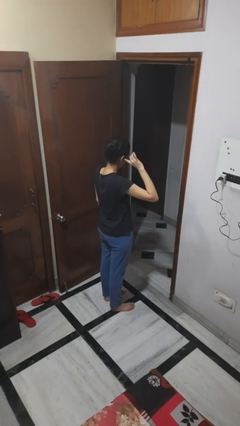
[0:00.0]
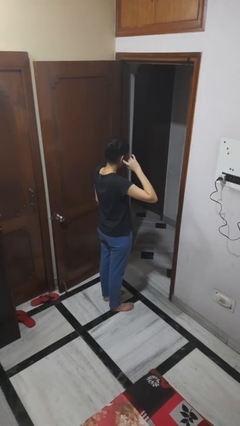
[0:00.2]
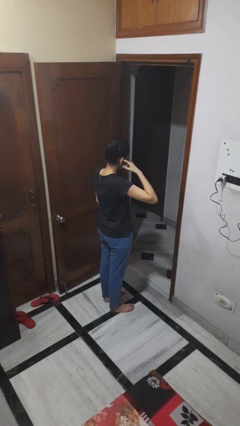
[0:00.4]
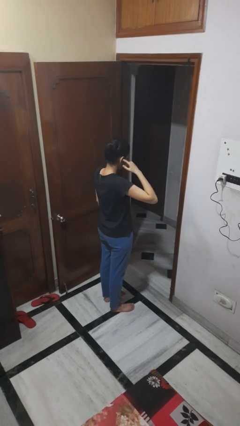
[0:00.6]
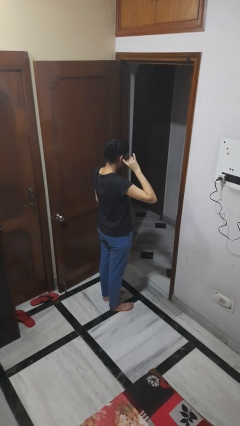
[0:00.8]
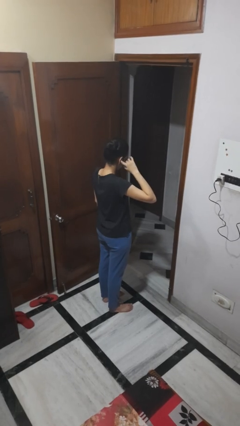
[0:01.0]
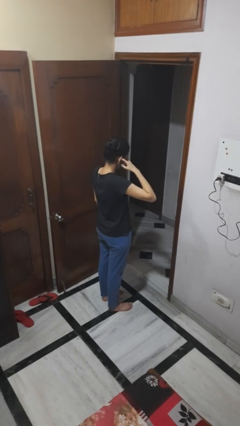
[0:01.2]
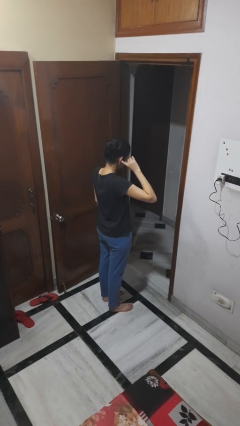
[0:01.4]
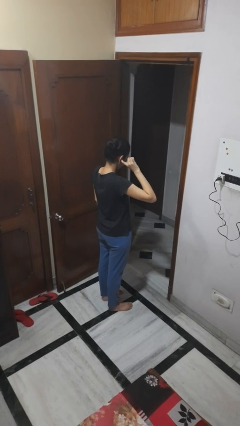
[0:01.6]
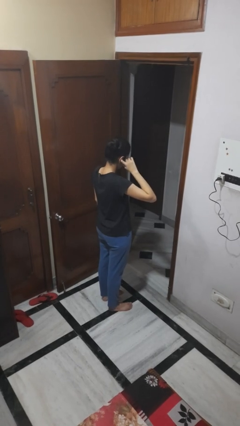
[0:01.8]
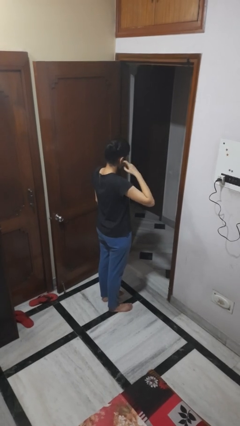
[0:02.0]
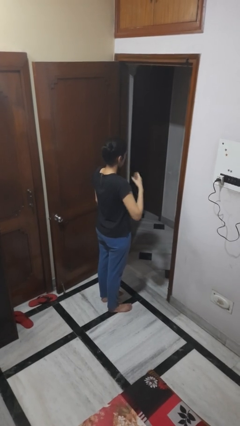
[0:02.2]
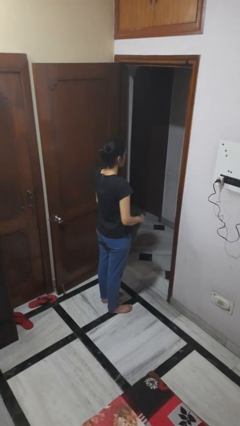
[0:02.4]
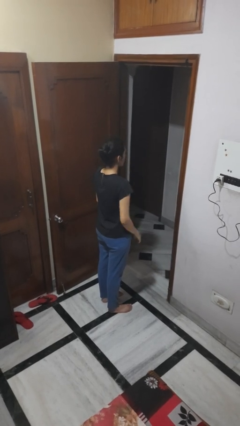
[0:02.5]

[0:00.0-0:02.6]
person puts fingers in ear

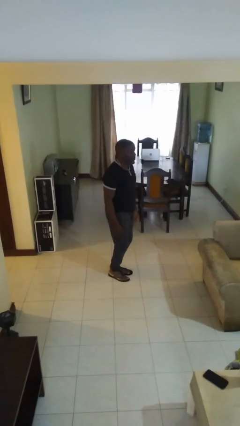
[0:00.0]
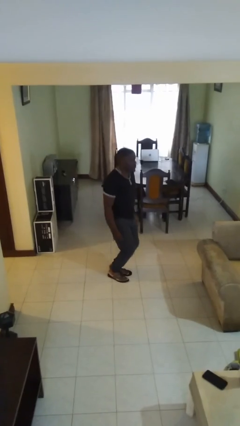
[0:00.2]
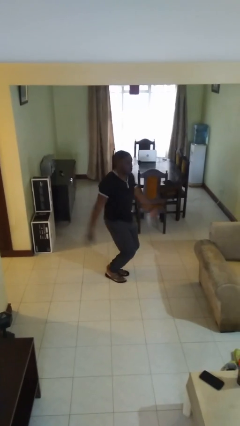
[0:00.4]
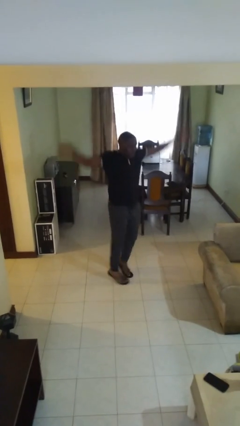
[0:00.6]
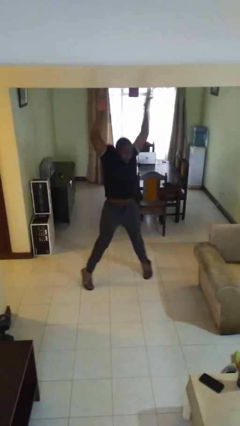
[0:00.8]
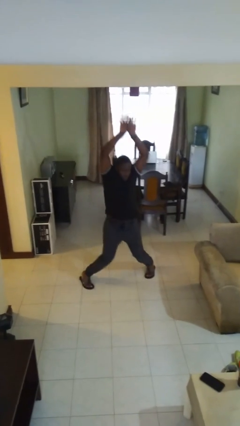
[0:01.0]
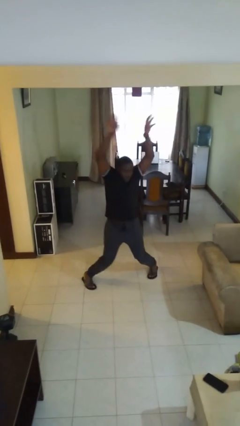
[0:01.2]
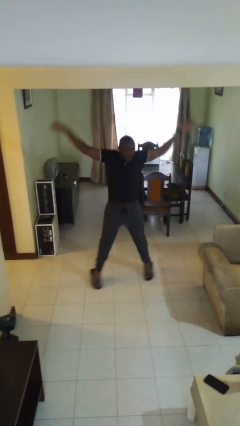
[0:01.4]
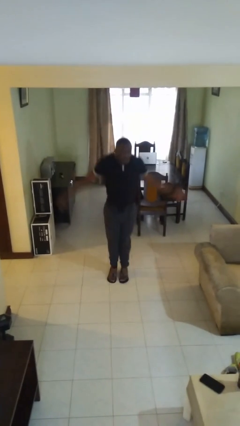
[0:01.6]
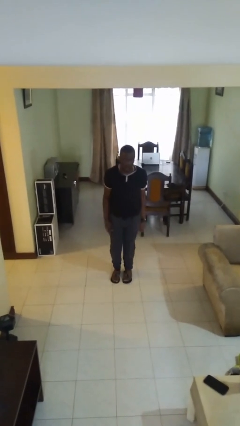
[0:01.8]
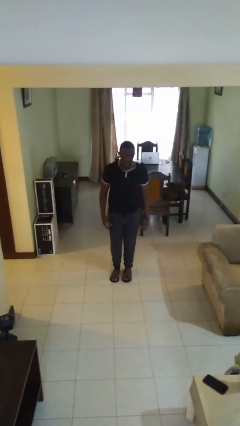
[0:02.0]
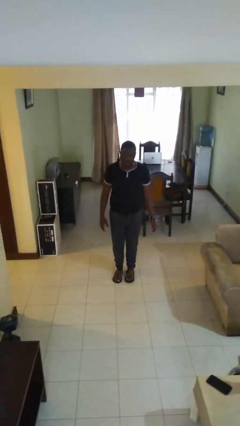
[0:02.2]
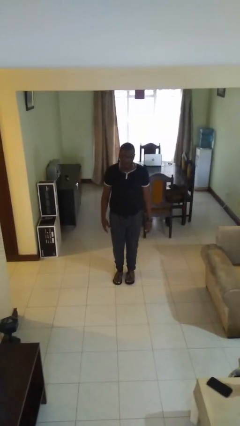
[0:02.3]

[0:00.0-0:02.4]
person exercises with jumping jacks

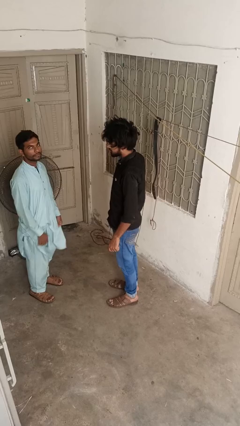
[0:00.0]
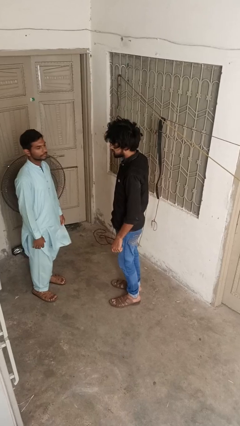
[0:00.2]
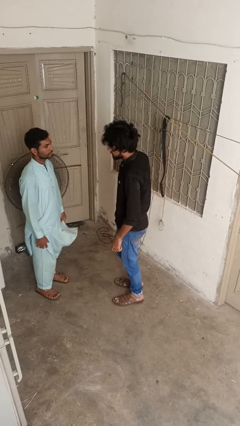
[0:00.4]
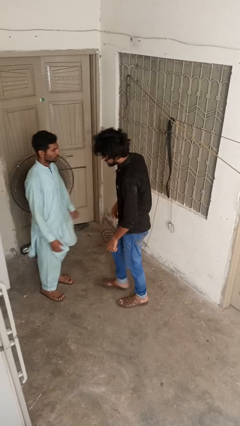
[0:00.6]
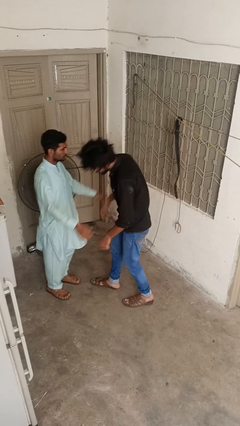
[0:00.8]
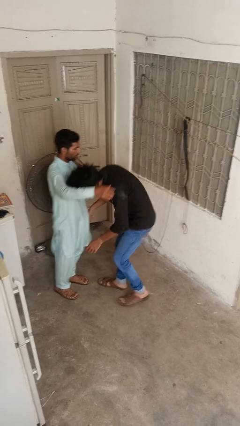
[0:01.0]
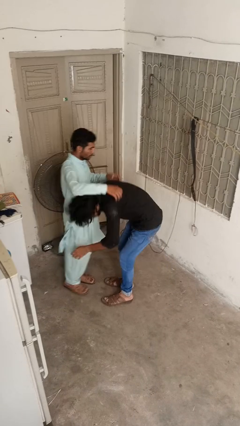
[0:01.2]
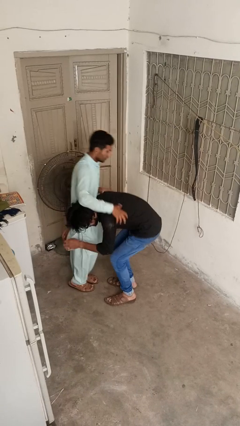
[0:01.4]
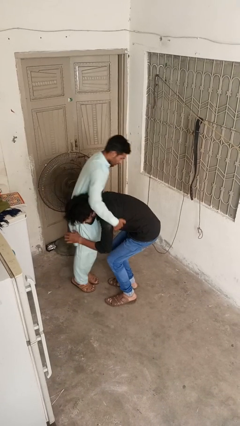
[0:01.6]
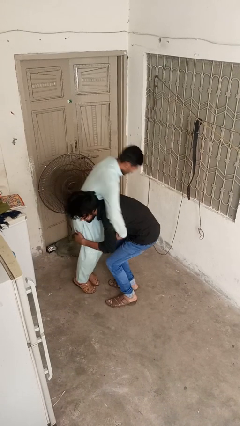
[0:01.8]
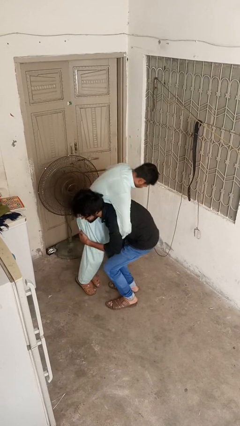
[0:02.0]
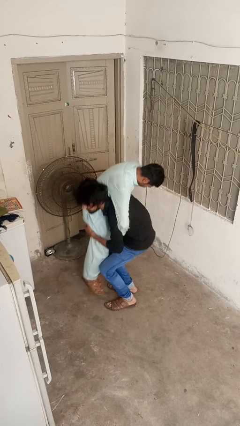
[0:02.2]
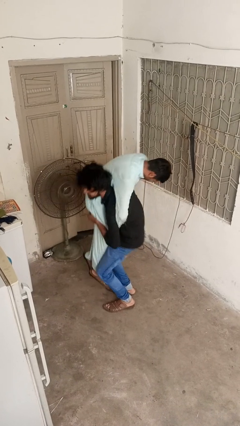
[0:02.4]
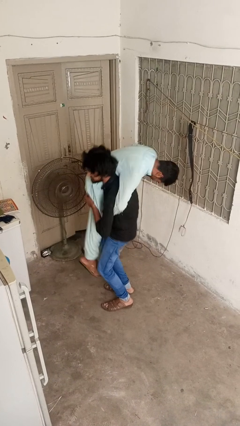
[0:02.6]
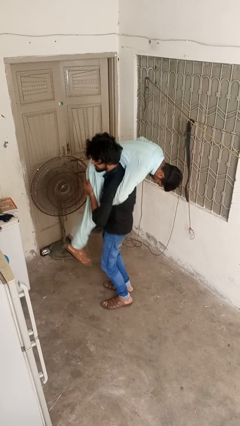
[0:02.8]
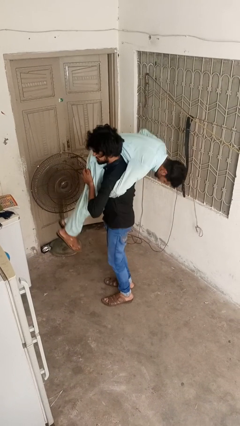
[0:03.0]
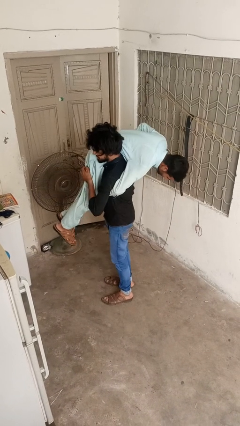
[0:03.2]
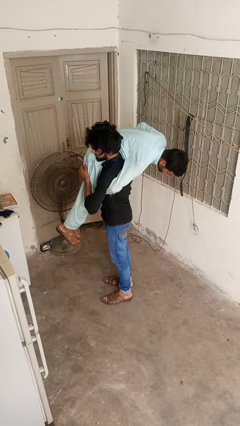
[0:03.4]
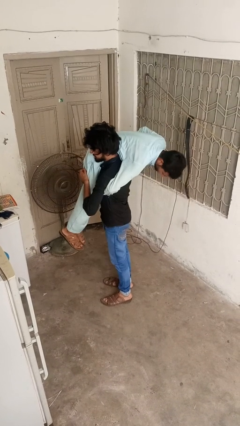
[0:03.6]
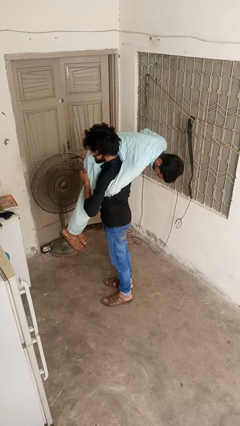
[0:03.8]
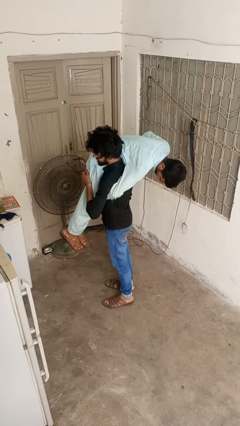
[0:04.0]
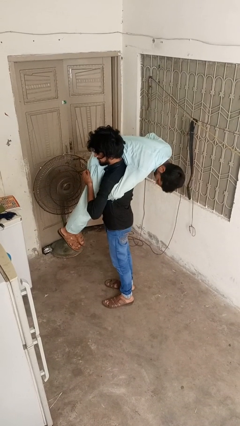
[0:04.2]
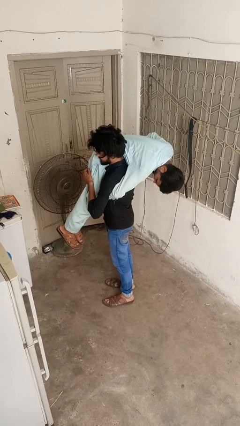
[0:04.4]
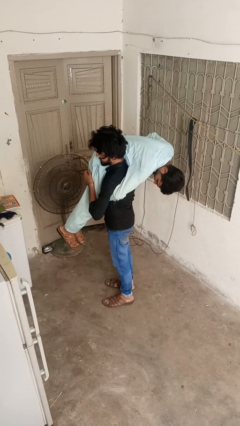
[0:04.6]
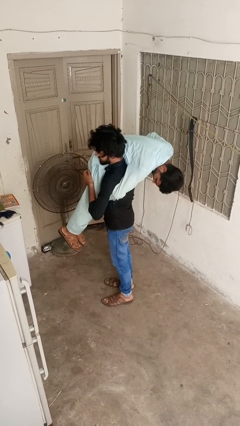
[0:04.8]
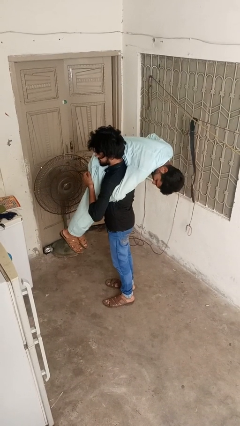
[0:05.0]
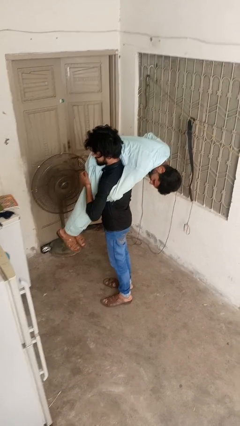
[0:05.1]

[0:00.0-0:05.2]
person carries person over shoulder

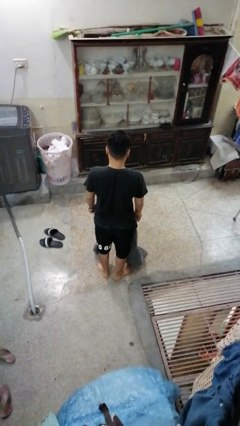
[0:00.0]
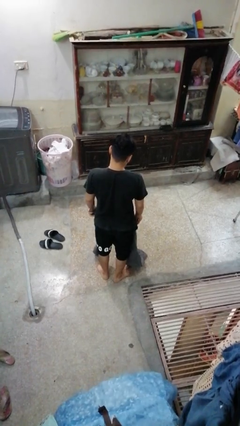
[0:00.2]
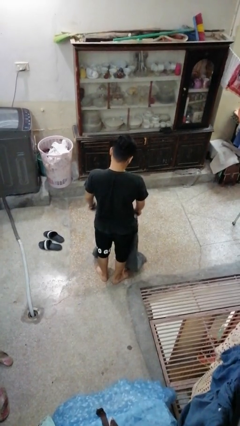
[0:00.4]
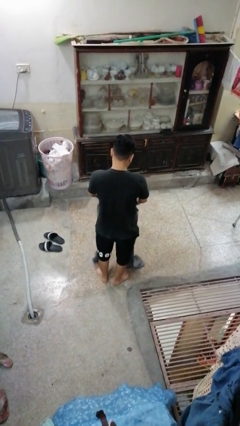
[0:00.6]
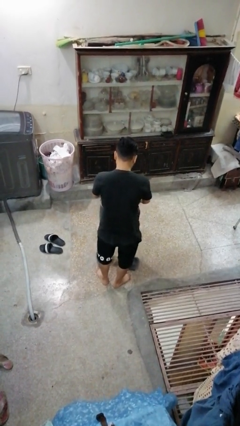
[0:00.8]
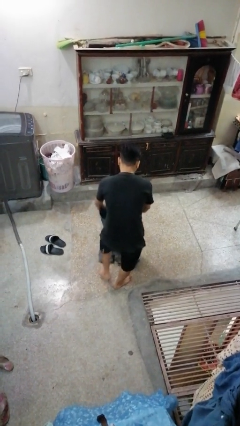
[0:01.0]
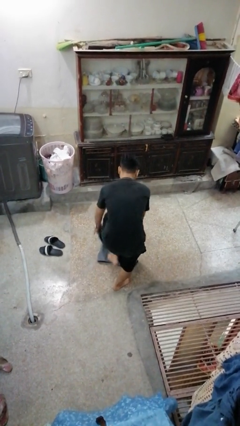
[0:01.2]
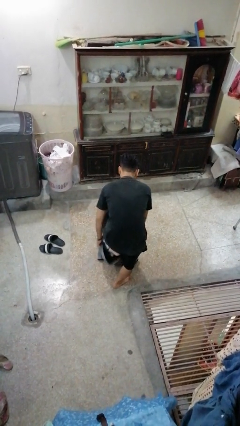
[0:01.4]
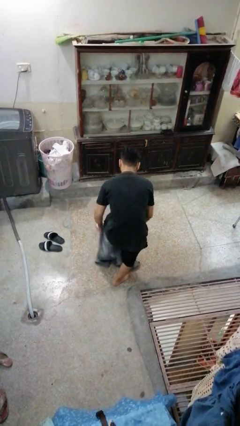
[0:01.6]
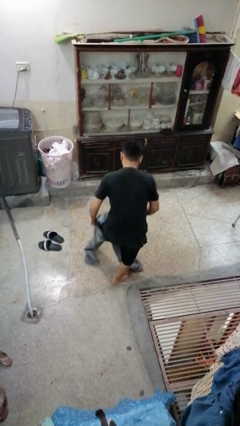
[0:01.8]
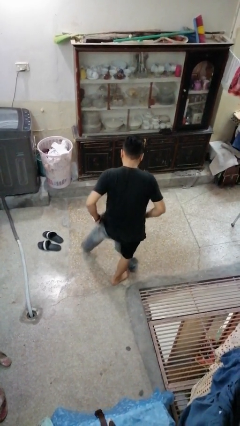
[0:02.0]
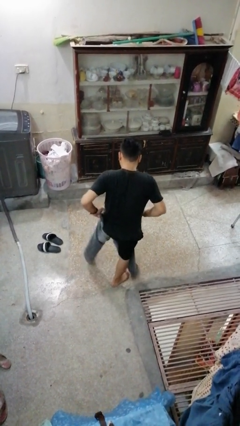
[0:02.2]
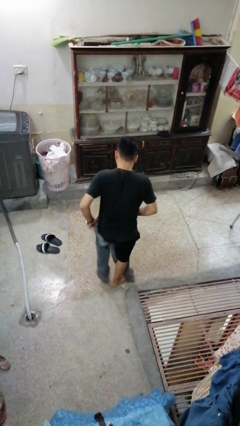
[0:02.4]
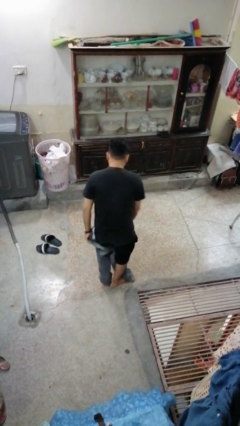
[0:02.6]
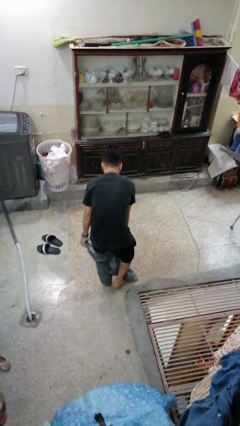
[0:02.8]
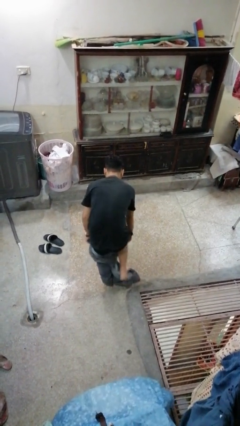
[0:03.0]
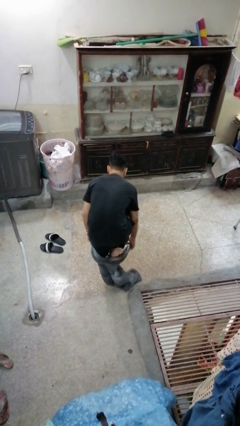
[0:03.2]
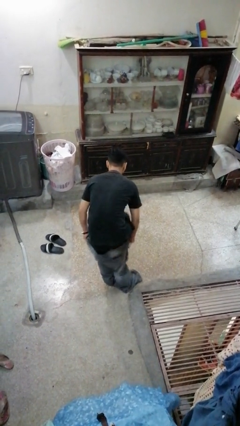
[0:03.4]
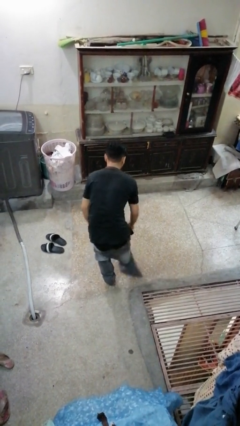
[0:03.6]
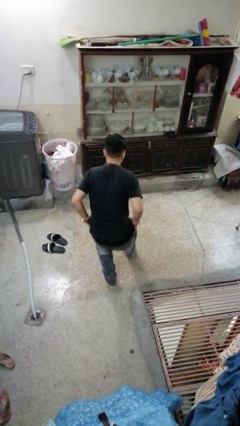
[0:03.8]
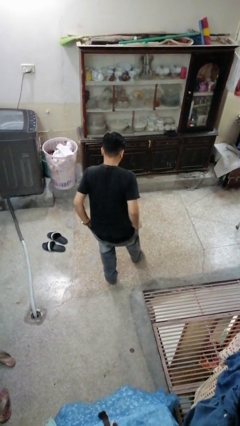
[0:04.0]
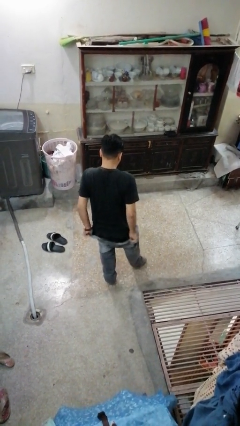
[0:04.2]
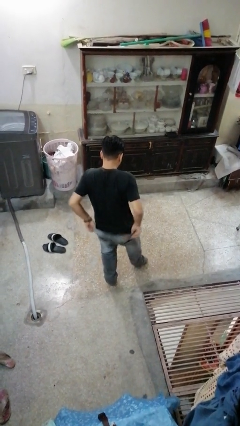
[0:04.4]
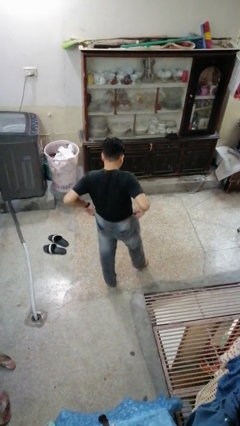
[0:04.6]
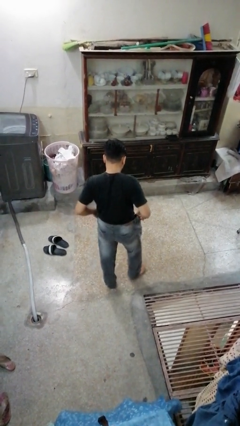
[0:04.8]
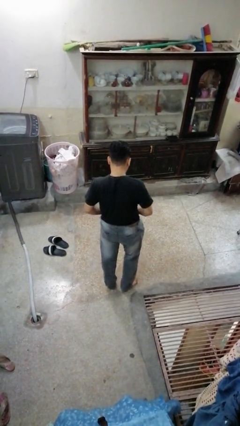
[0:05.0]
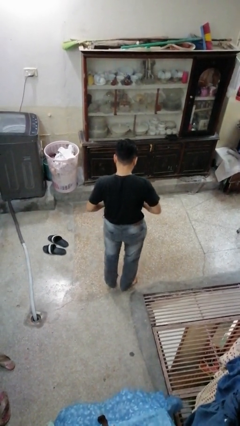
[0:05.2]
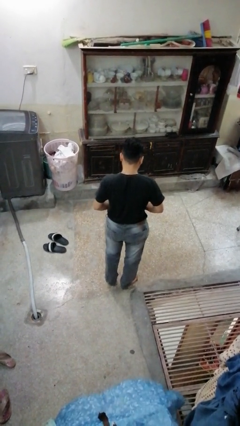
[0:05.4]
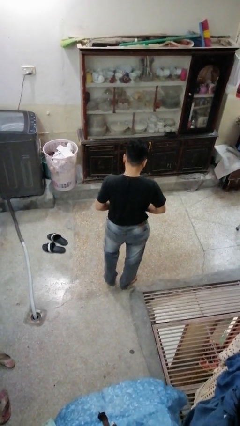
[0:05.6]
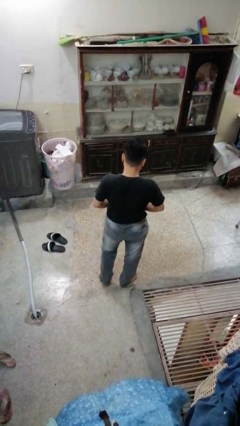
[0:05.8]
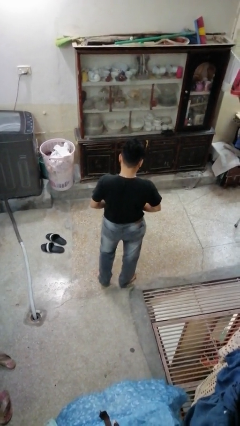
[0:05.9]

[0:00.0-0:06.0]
person puts on pants

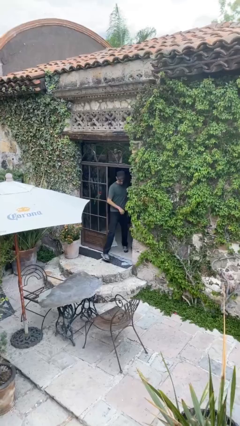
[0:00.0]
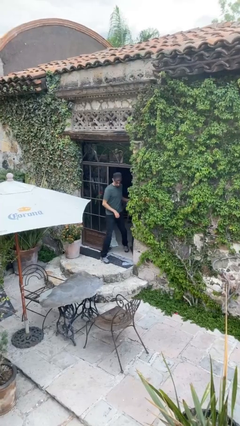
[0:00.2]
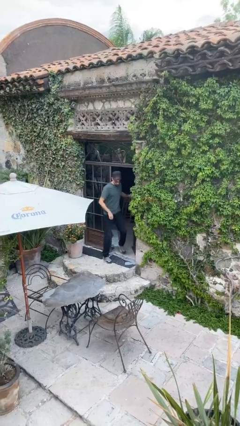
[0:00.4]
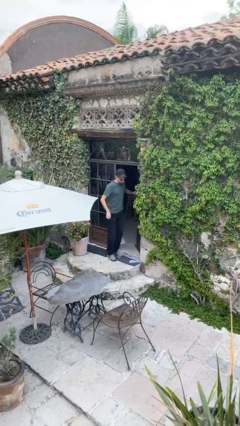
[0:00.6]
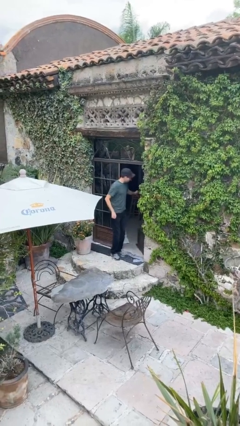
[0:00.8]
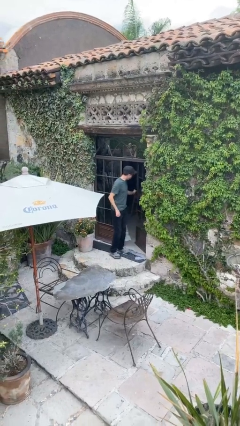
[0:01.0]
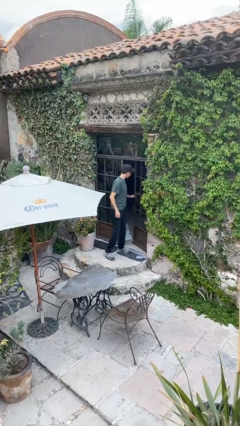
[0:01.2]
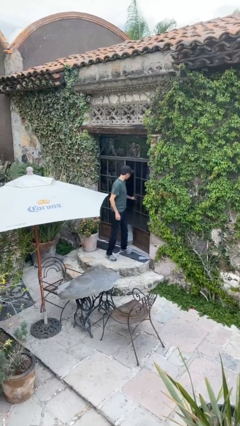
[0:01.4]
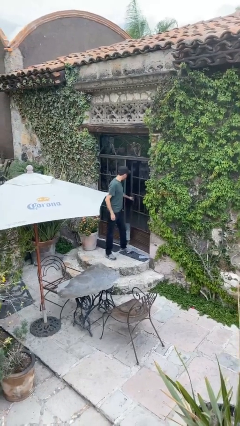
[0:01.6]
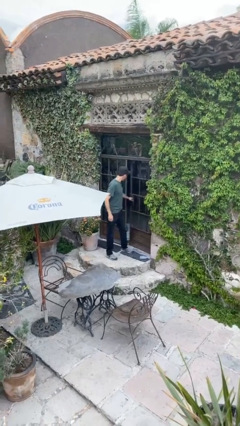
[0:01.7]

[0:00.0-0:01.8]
person enters scene through structure
